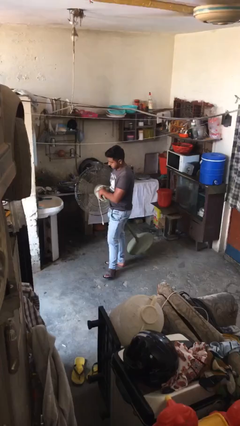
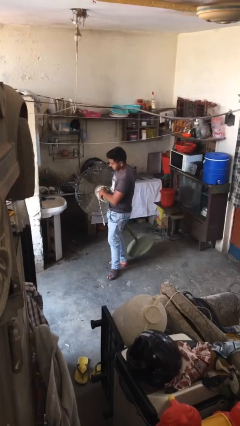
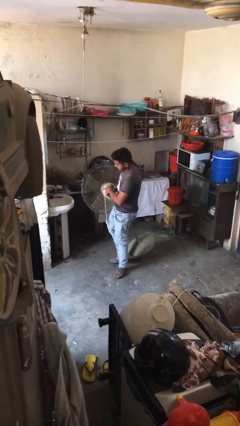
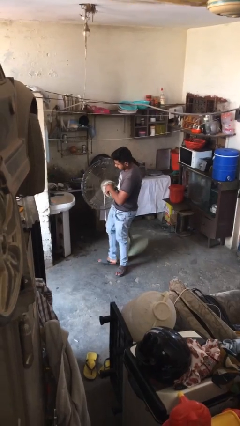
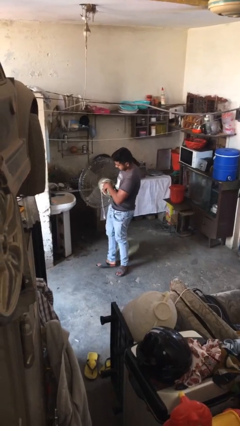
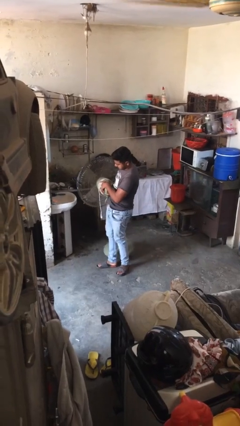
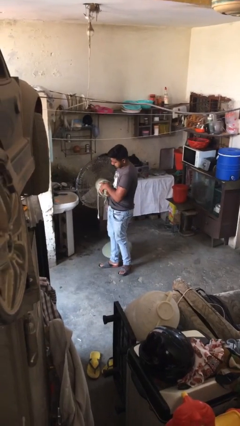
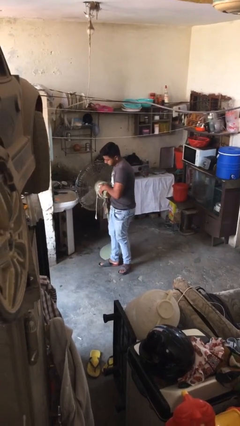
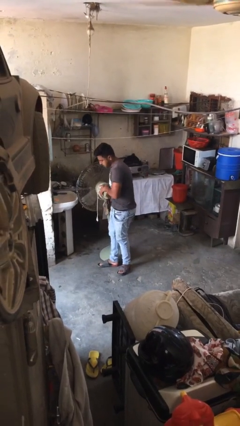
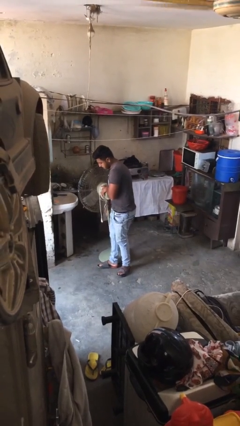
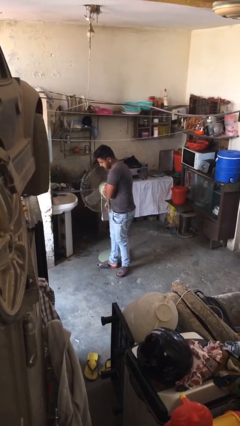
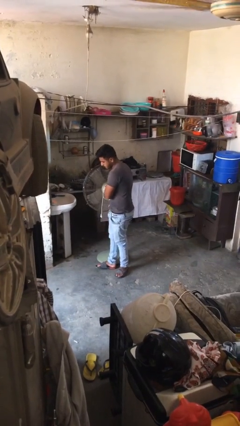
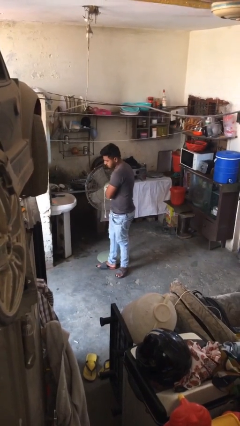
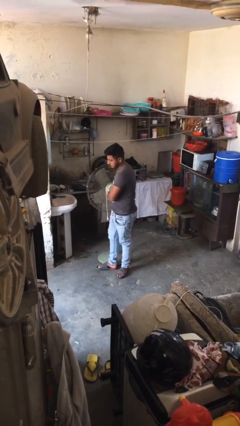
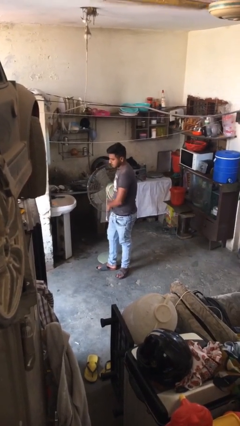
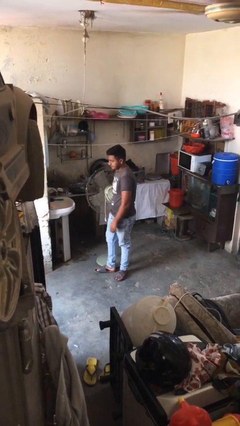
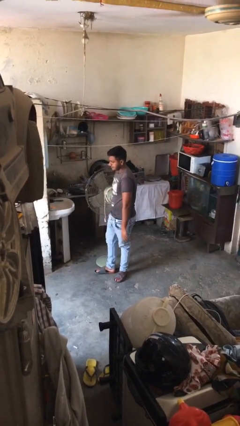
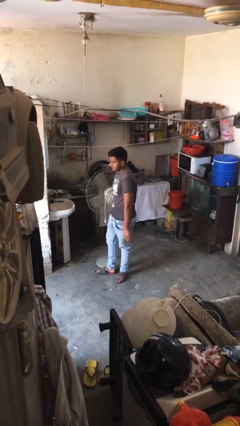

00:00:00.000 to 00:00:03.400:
person puts down object on floor

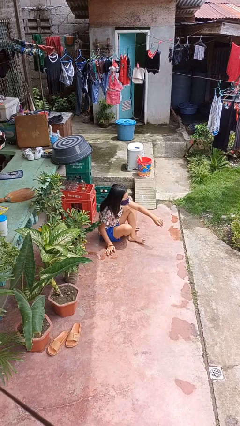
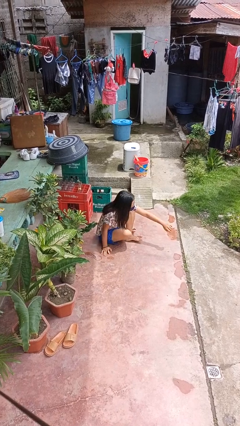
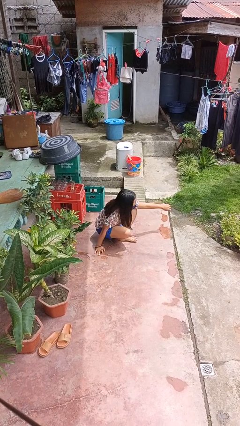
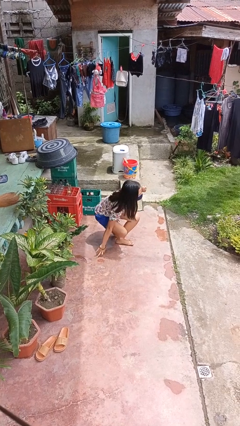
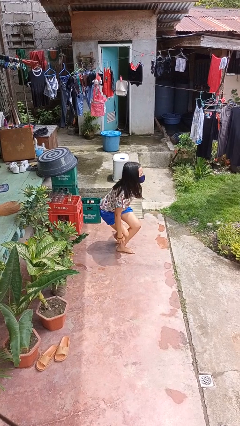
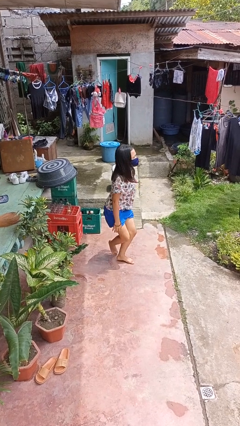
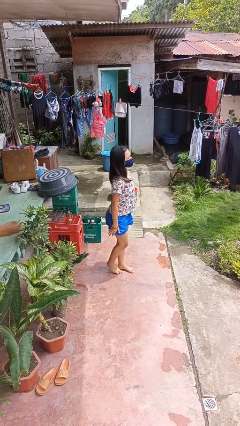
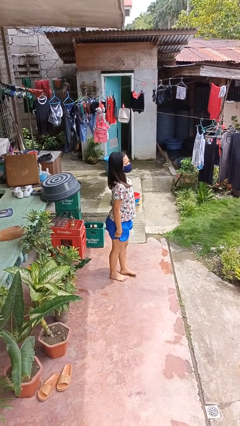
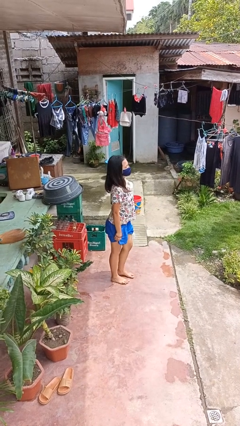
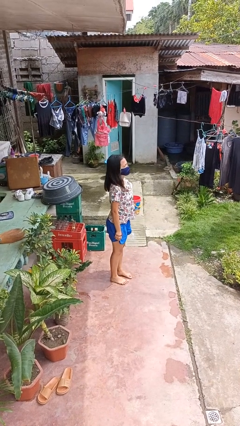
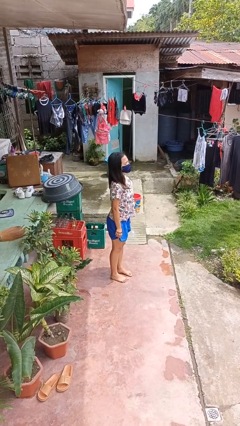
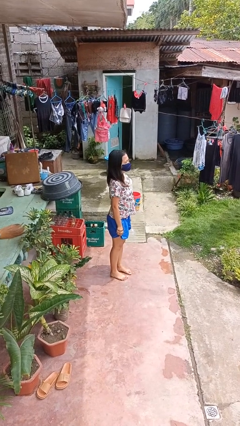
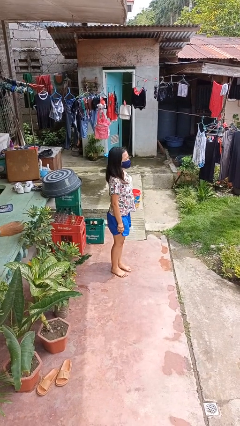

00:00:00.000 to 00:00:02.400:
person stands up from floor

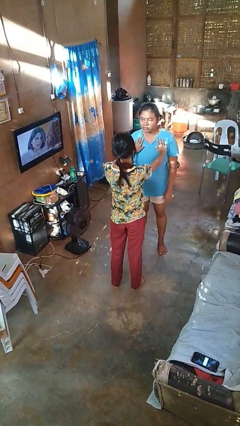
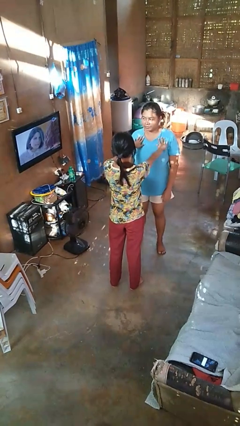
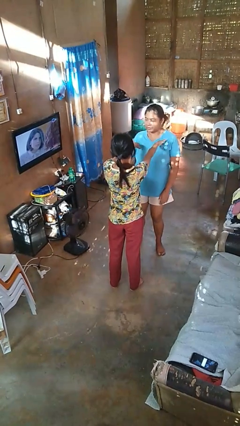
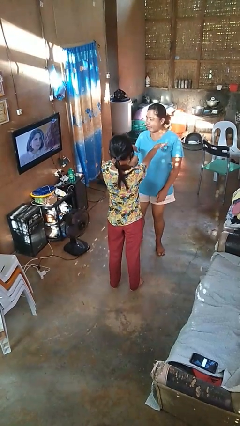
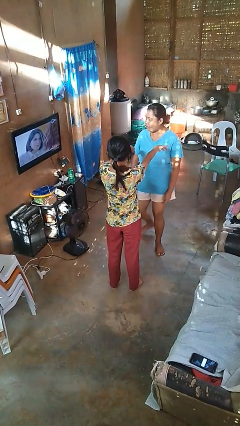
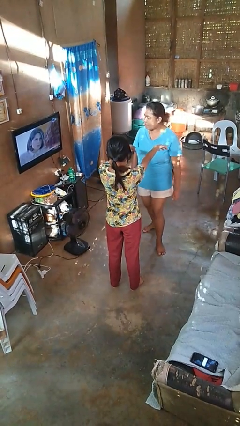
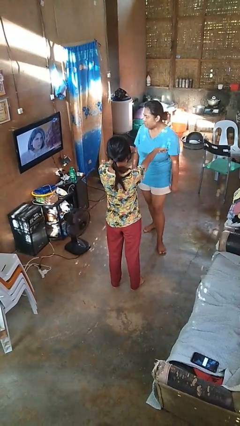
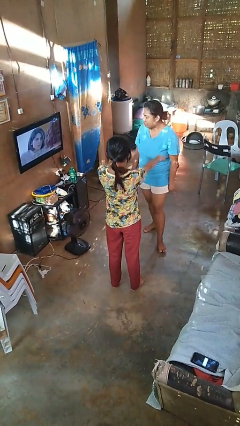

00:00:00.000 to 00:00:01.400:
person shoves person

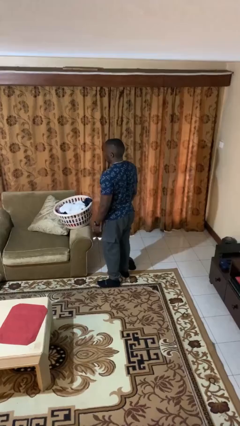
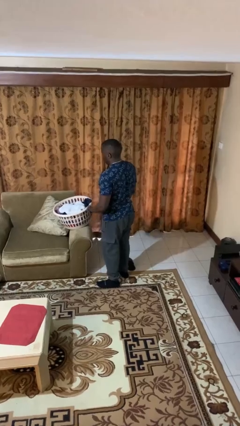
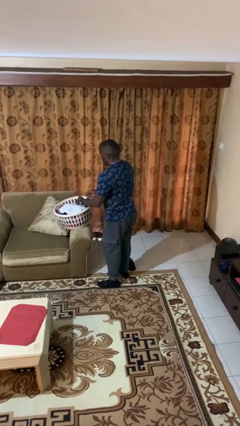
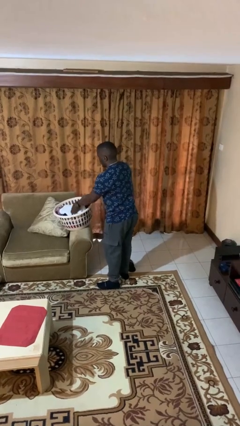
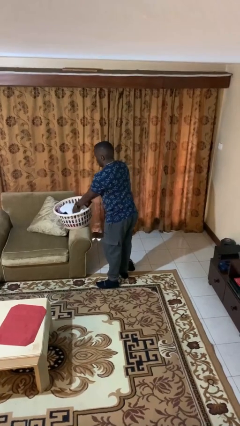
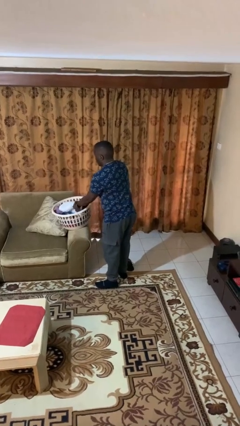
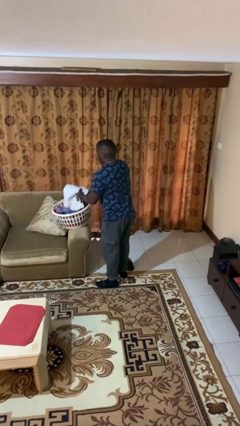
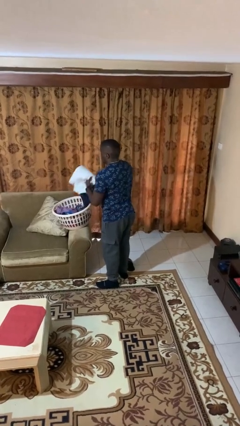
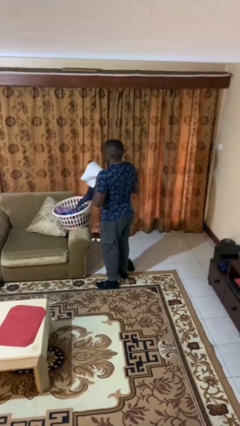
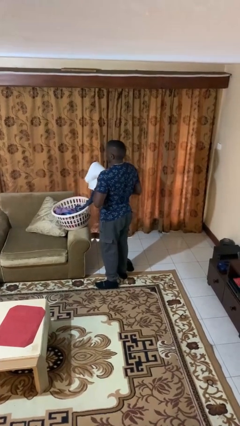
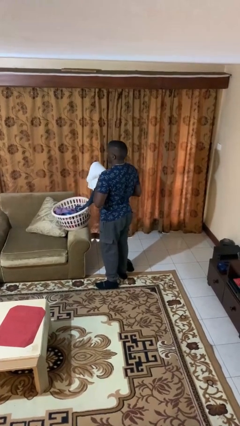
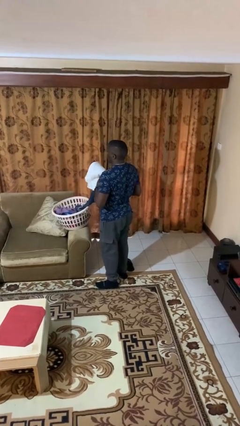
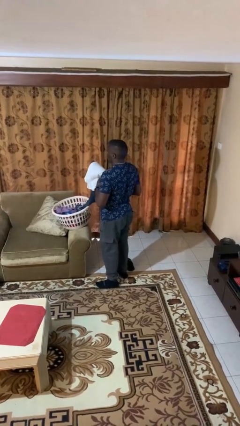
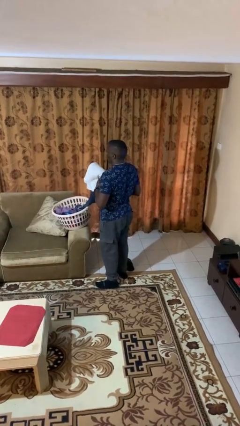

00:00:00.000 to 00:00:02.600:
person takes object from basket

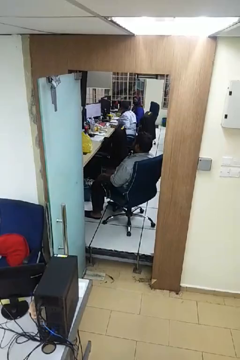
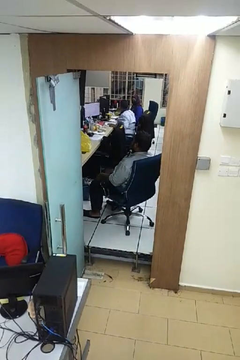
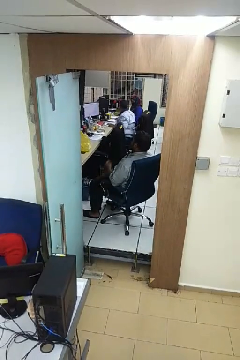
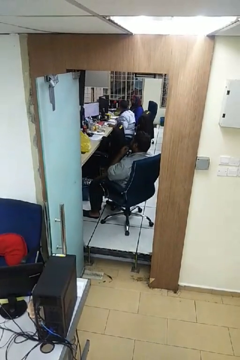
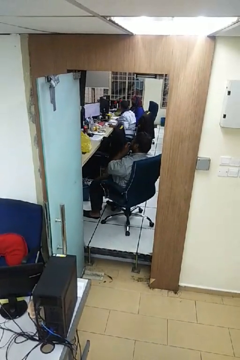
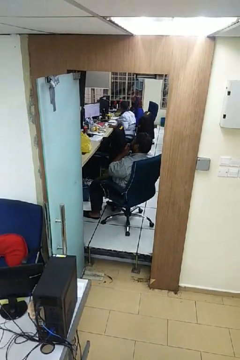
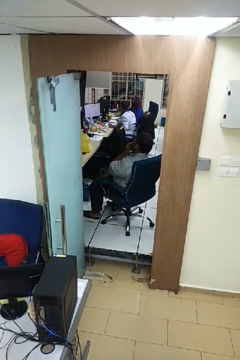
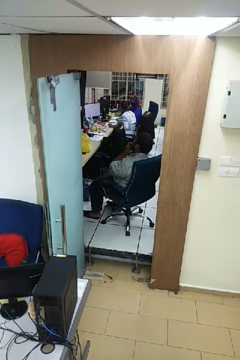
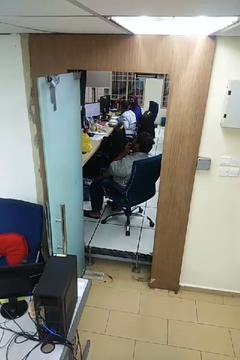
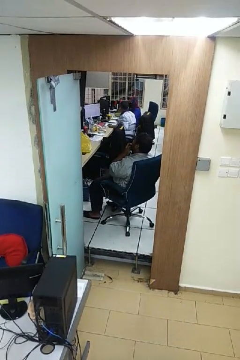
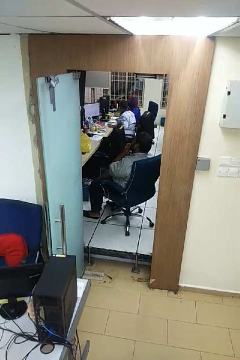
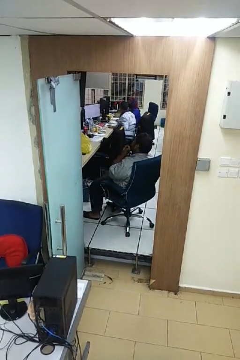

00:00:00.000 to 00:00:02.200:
person scratches face

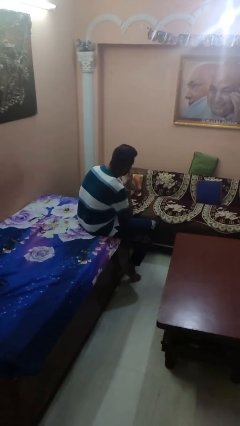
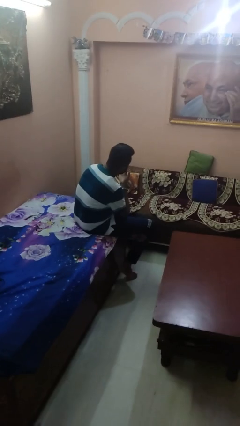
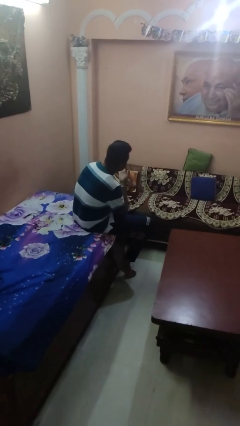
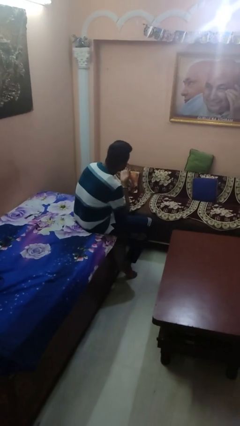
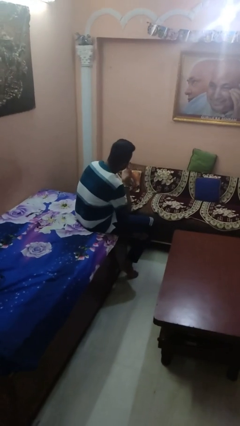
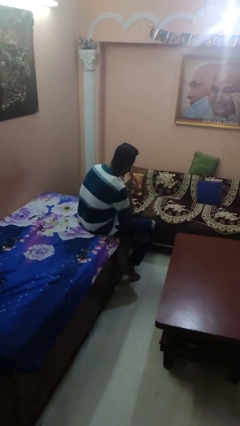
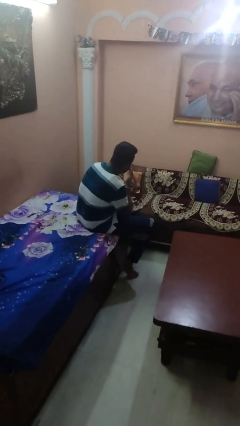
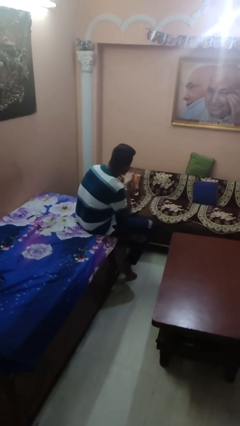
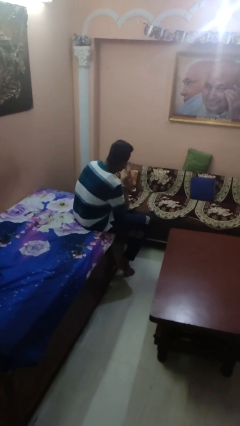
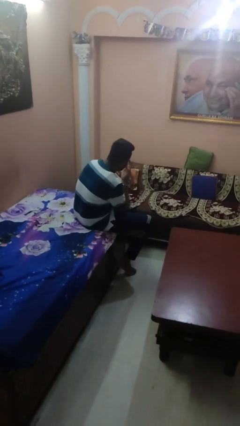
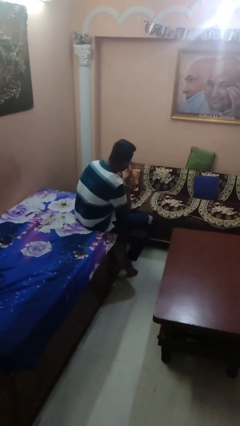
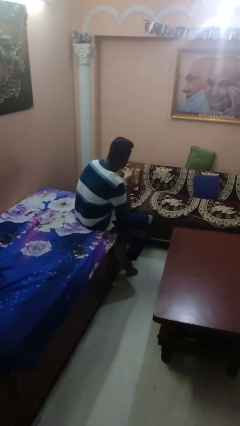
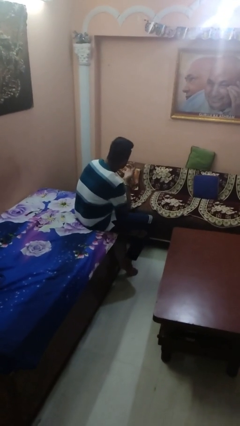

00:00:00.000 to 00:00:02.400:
person licks fingers

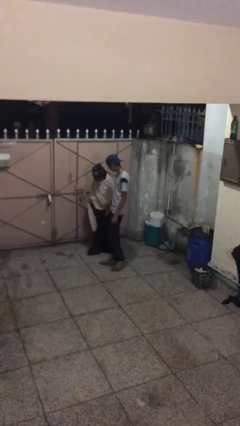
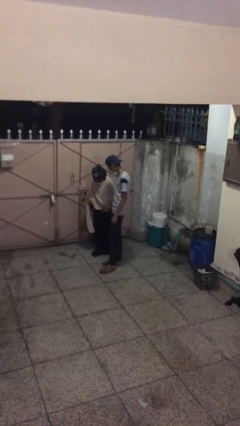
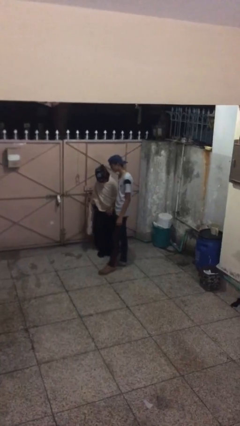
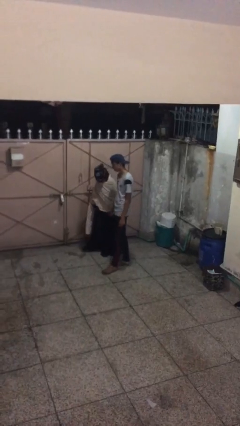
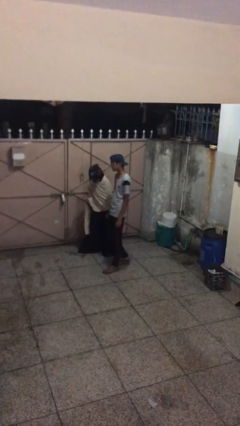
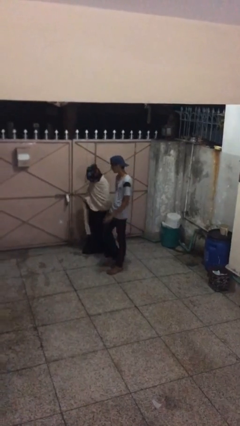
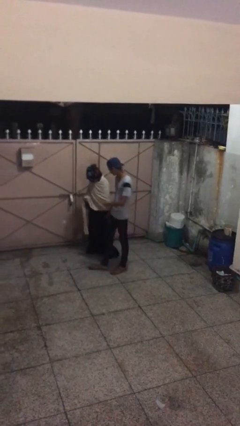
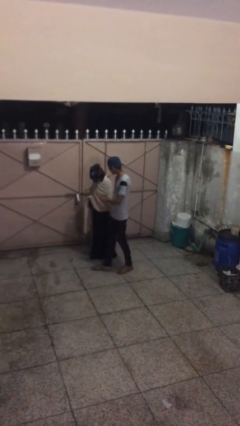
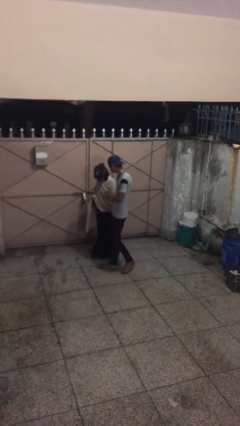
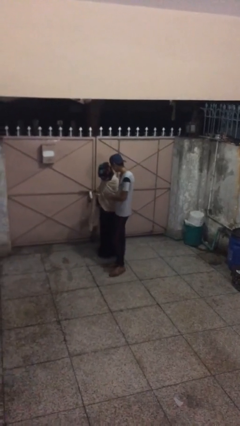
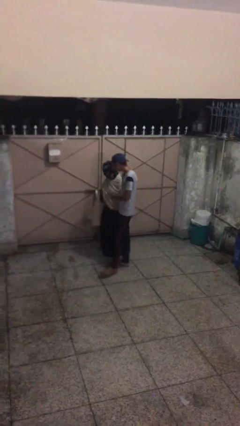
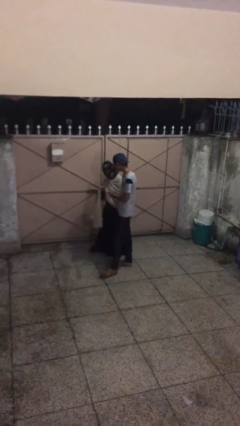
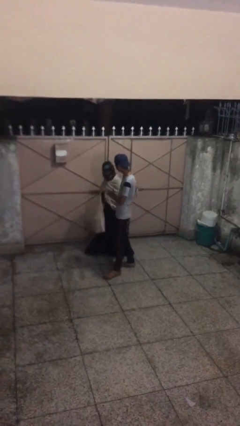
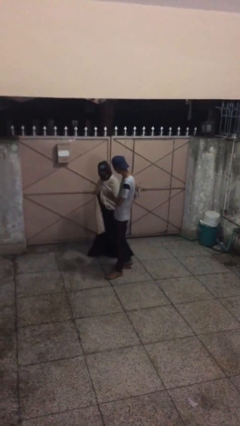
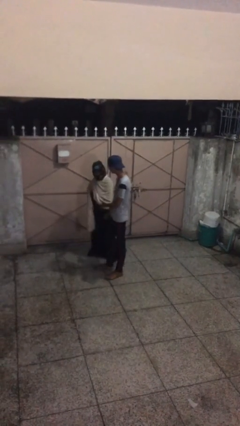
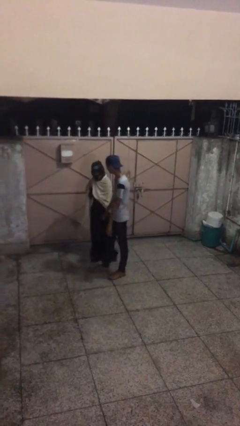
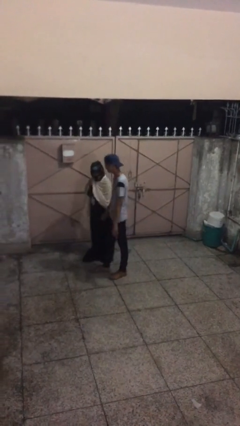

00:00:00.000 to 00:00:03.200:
person holds hand
